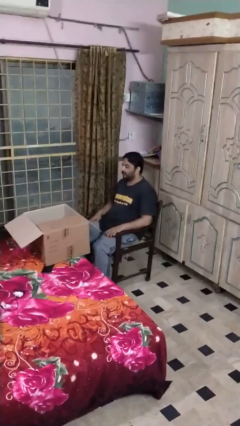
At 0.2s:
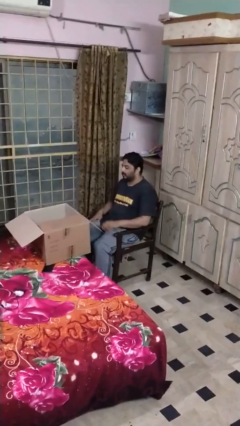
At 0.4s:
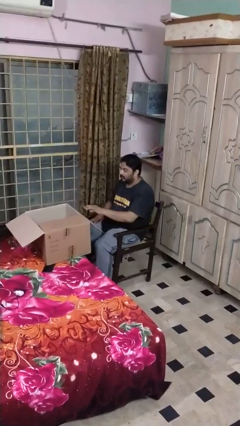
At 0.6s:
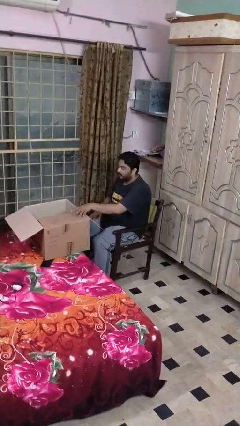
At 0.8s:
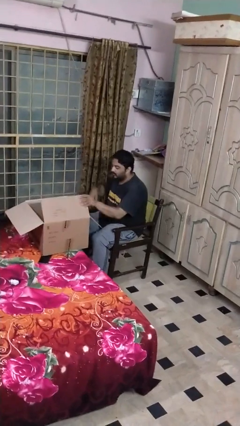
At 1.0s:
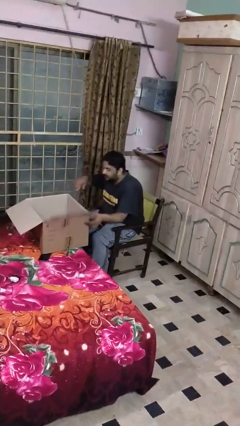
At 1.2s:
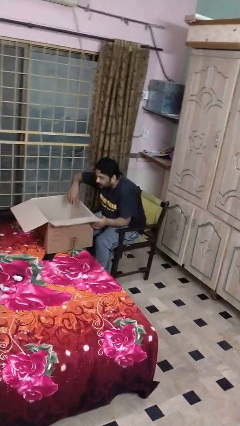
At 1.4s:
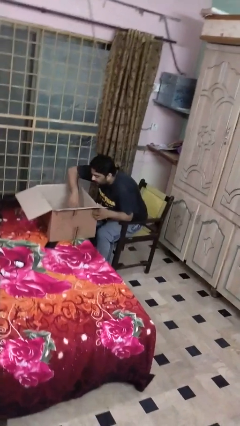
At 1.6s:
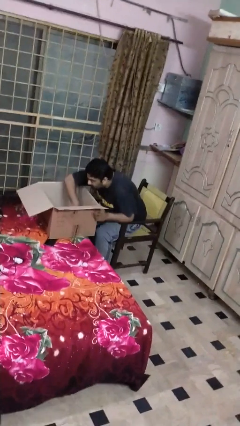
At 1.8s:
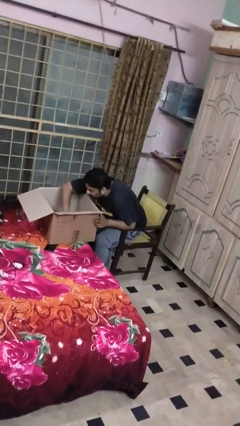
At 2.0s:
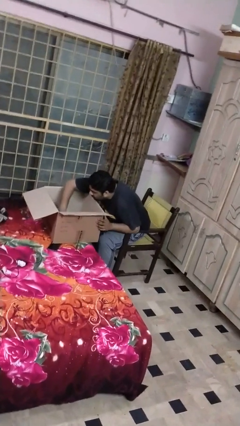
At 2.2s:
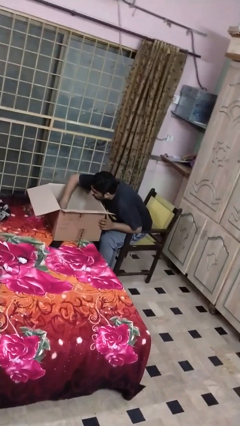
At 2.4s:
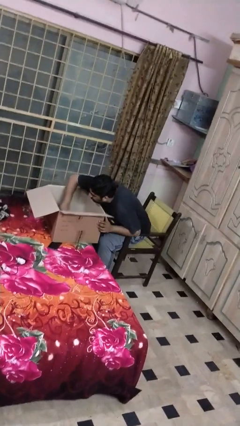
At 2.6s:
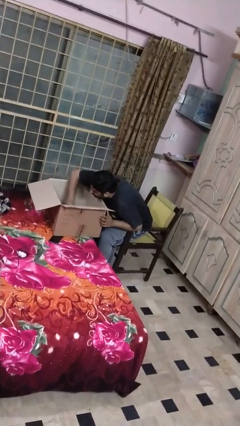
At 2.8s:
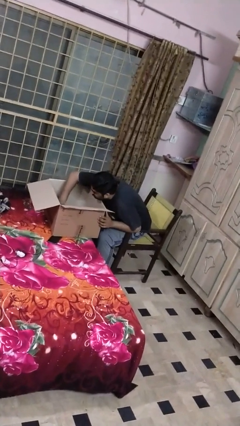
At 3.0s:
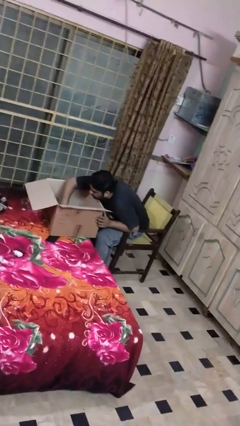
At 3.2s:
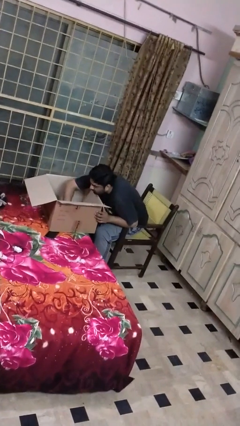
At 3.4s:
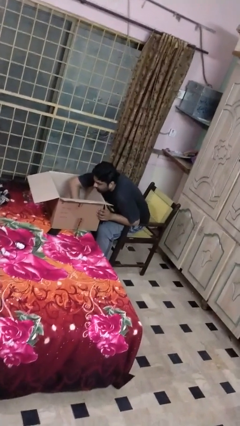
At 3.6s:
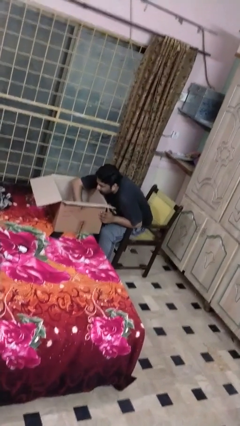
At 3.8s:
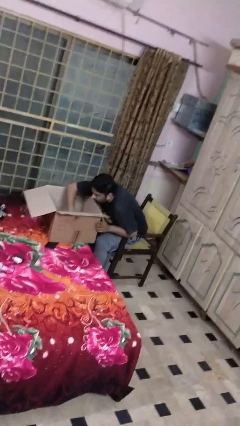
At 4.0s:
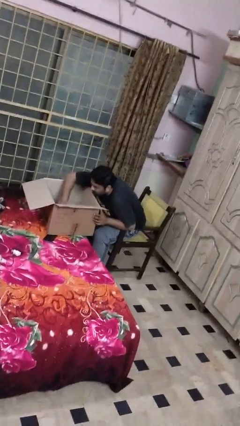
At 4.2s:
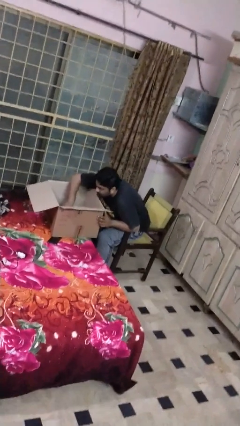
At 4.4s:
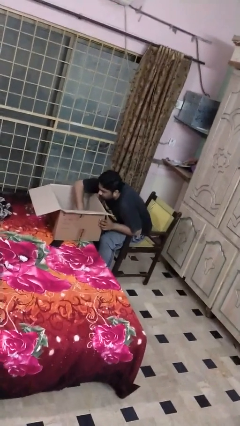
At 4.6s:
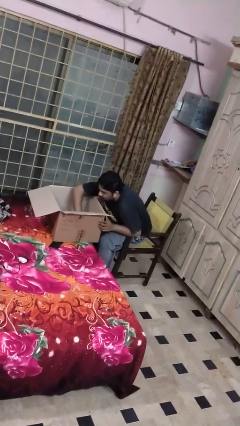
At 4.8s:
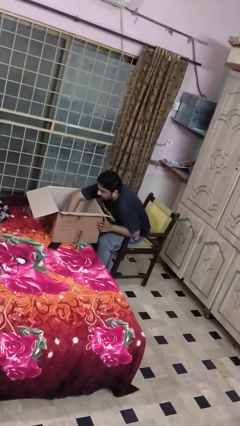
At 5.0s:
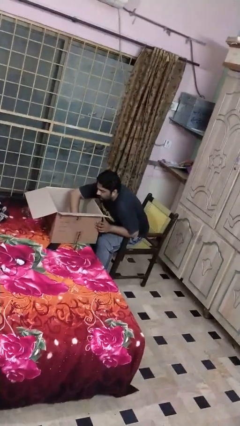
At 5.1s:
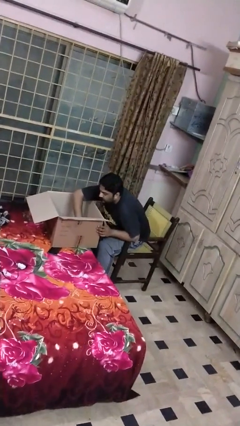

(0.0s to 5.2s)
person searches in box

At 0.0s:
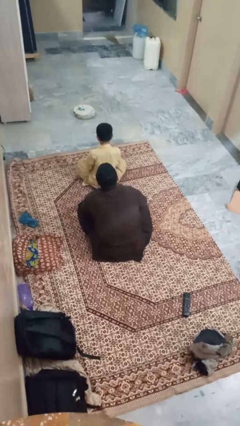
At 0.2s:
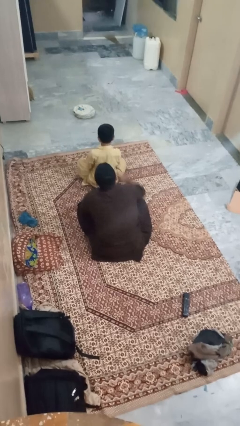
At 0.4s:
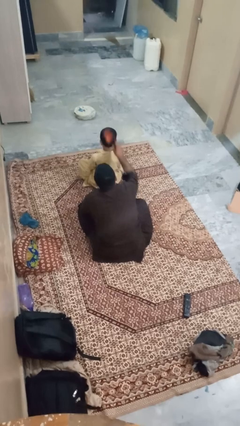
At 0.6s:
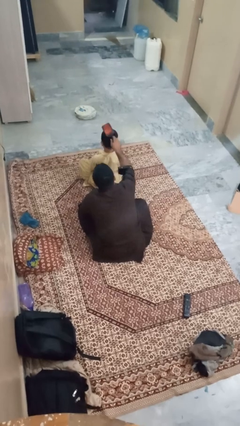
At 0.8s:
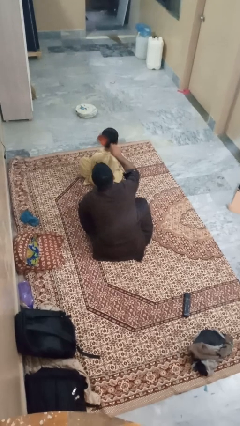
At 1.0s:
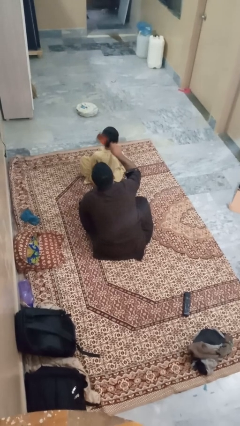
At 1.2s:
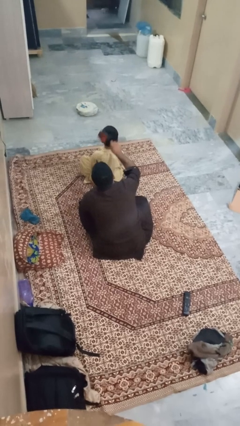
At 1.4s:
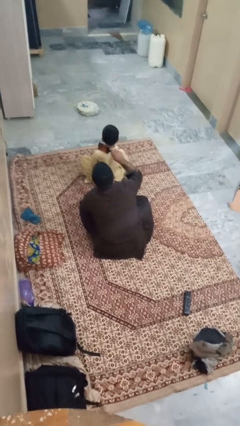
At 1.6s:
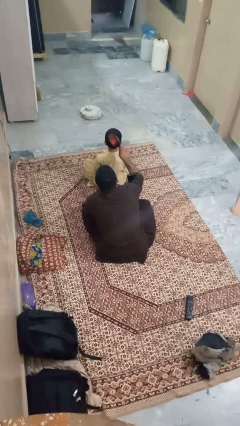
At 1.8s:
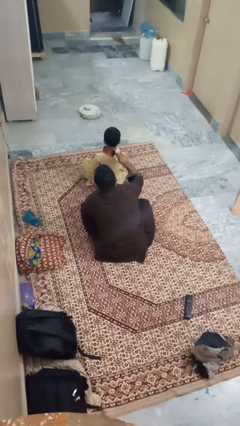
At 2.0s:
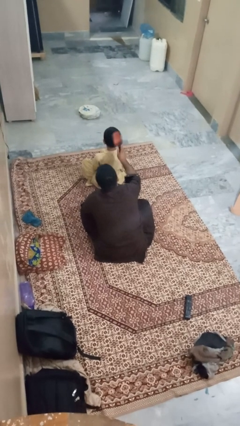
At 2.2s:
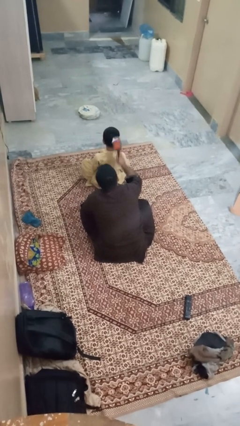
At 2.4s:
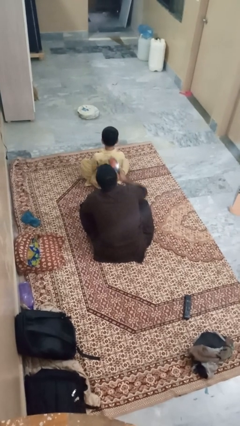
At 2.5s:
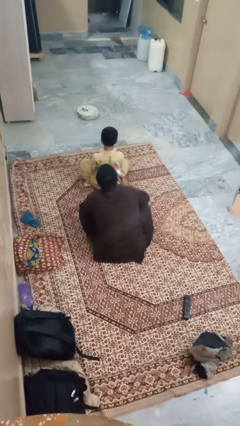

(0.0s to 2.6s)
person brushes hair of person

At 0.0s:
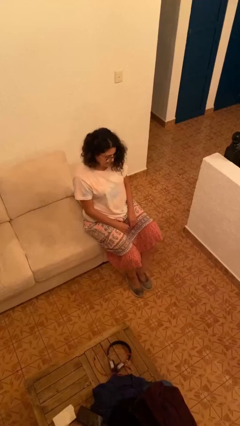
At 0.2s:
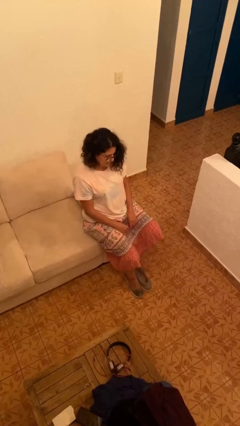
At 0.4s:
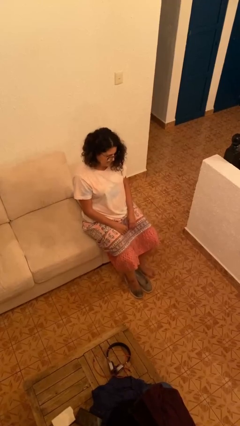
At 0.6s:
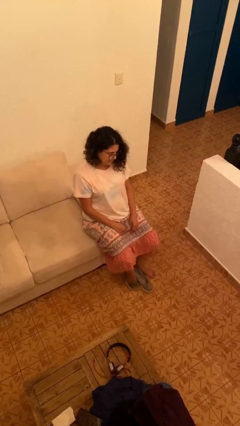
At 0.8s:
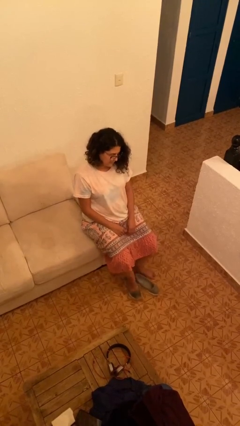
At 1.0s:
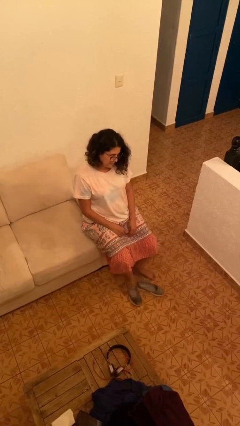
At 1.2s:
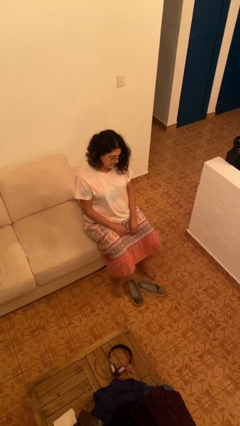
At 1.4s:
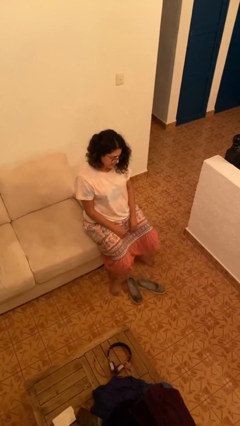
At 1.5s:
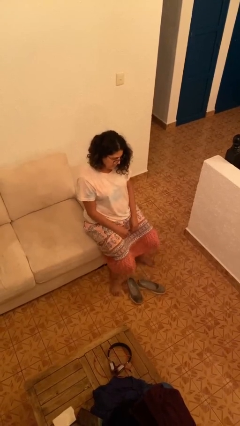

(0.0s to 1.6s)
person takes off shoes

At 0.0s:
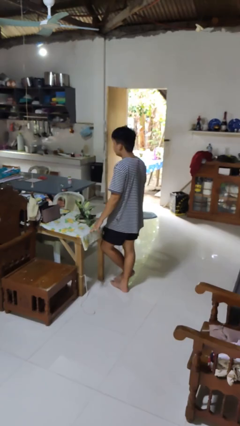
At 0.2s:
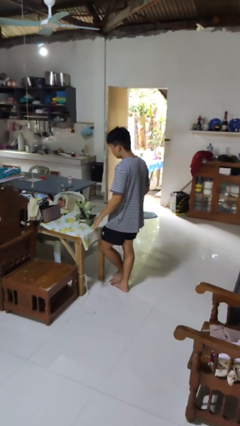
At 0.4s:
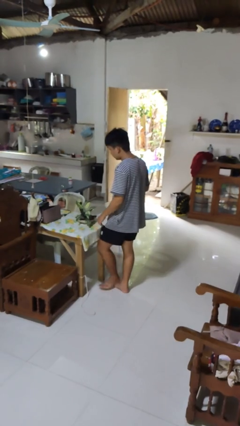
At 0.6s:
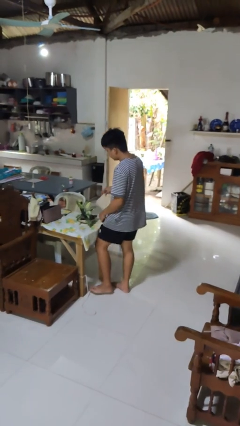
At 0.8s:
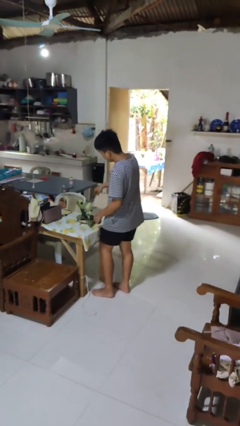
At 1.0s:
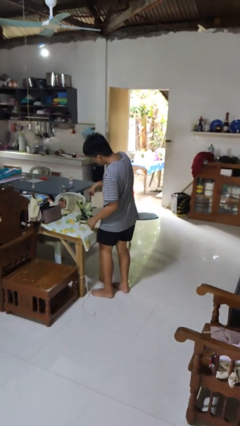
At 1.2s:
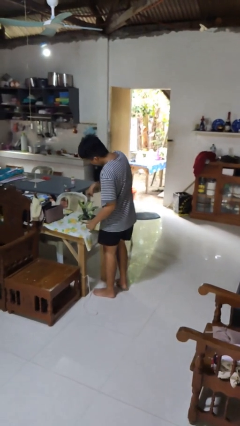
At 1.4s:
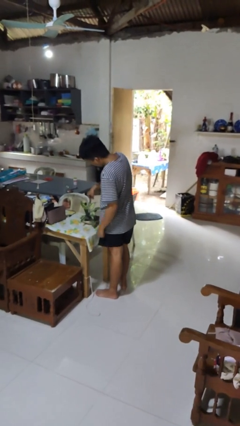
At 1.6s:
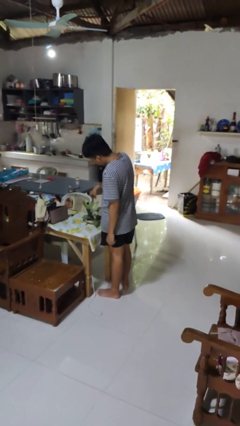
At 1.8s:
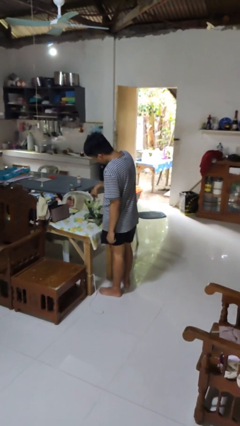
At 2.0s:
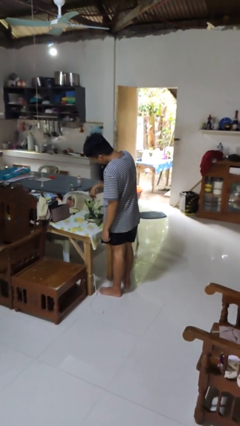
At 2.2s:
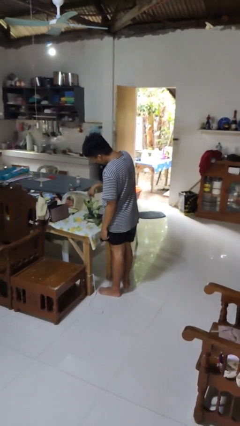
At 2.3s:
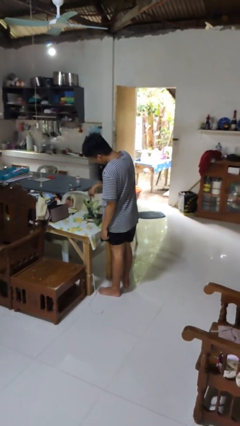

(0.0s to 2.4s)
person waters houseplant

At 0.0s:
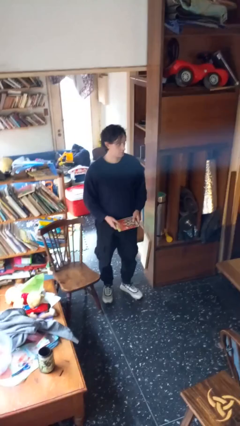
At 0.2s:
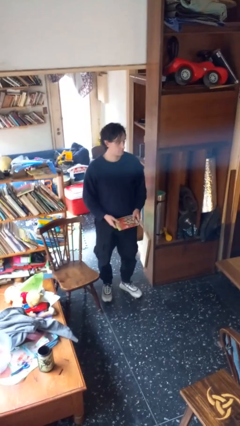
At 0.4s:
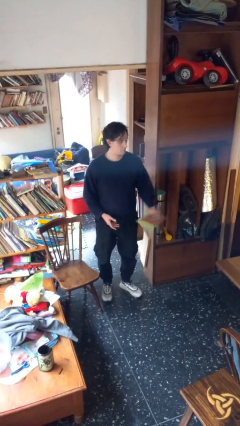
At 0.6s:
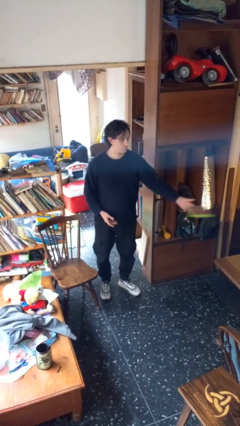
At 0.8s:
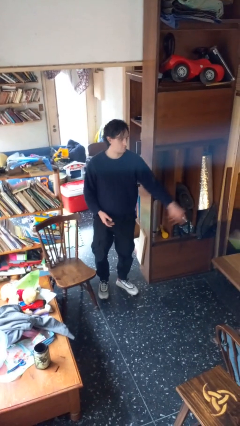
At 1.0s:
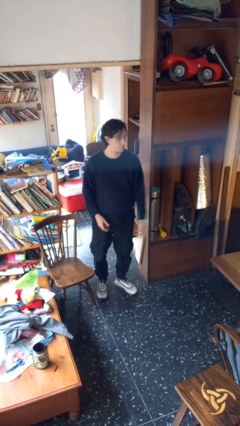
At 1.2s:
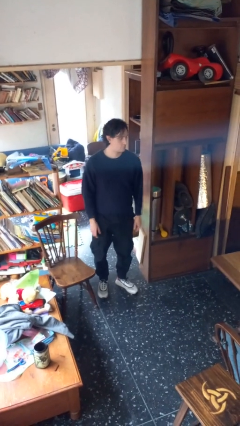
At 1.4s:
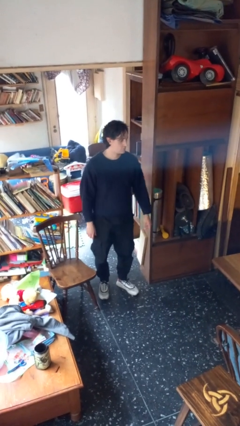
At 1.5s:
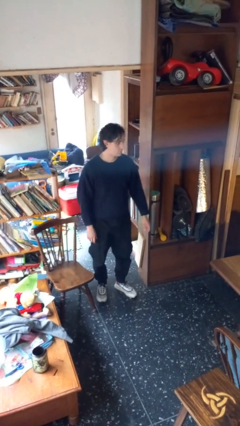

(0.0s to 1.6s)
person throws object on table

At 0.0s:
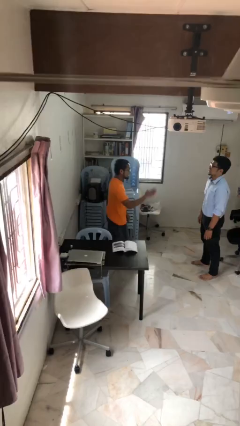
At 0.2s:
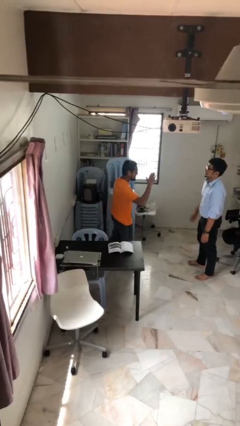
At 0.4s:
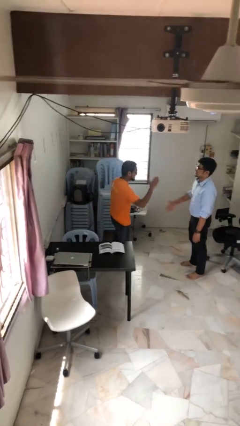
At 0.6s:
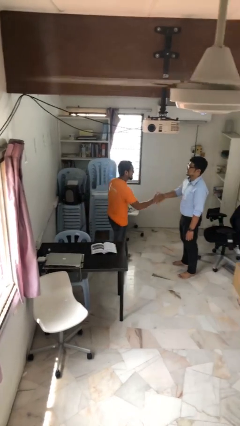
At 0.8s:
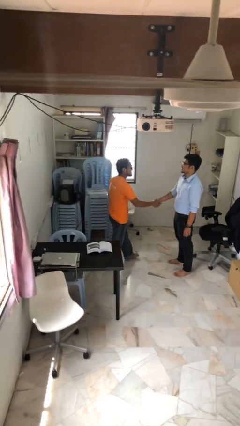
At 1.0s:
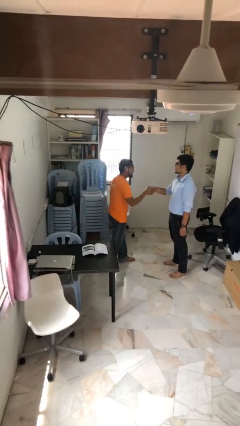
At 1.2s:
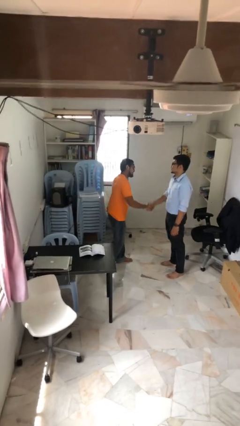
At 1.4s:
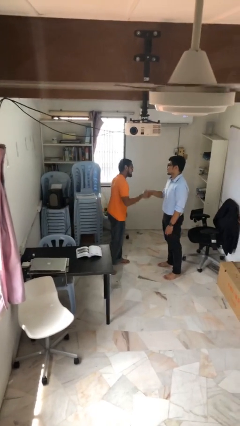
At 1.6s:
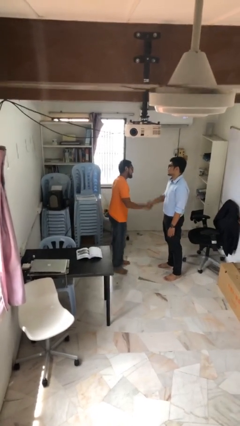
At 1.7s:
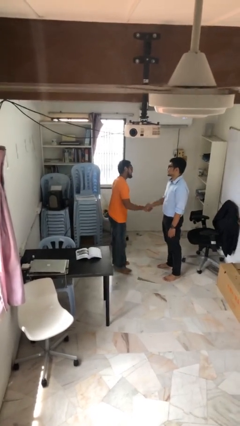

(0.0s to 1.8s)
person shakes hand

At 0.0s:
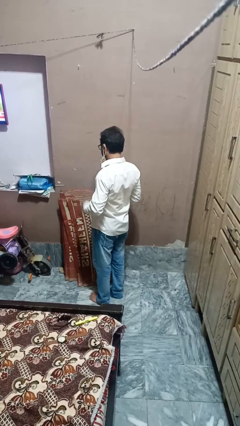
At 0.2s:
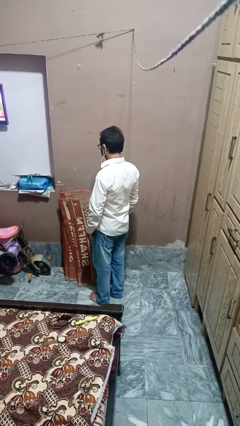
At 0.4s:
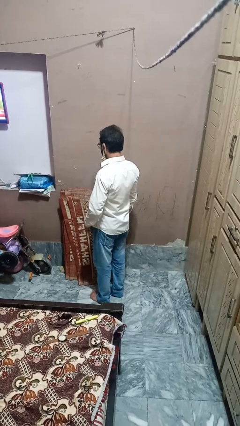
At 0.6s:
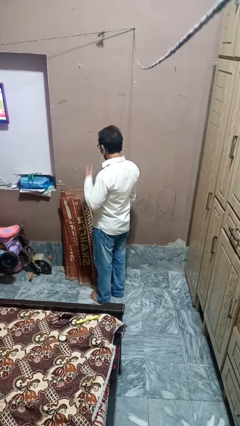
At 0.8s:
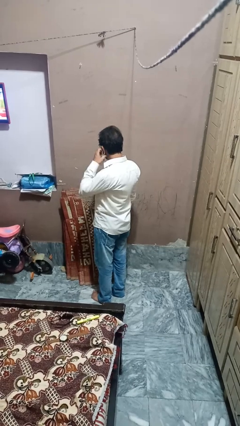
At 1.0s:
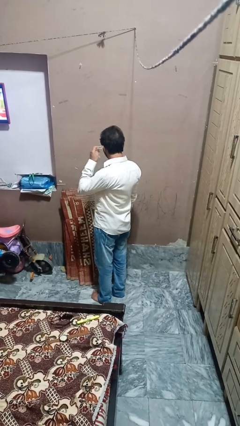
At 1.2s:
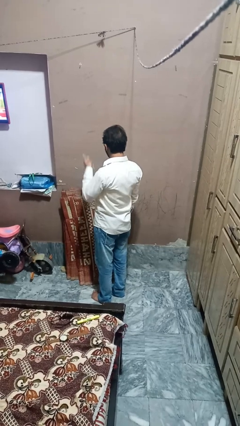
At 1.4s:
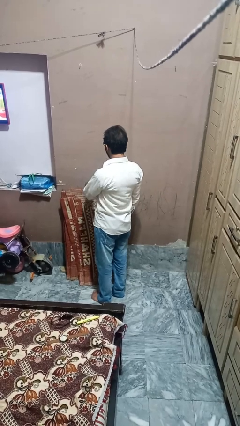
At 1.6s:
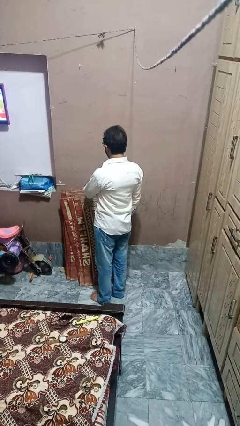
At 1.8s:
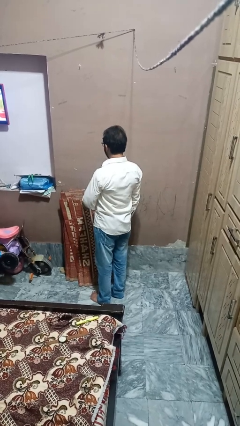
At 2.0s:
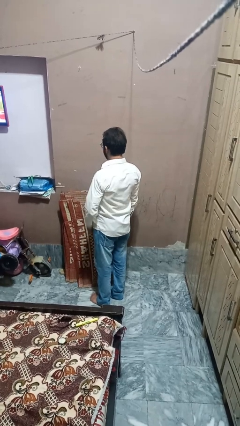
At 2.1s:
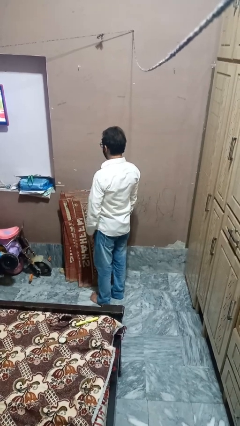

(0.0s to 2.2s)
person takes off earrings
